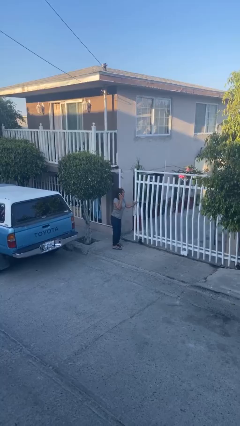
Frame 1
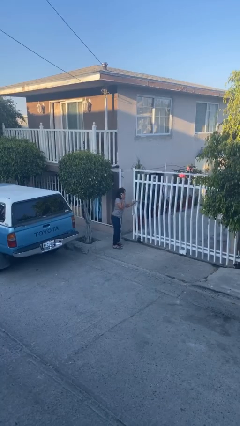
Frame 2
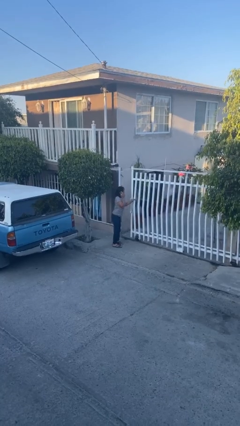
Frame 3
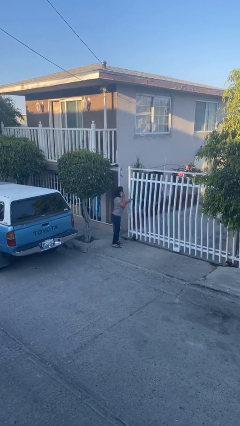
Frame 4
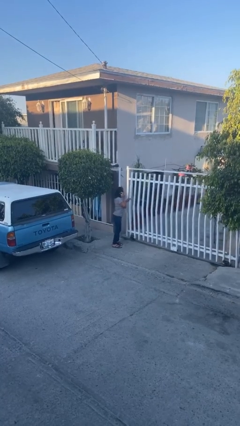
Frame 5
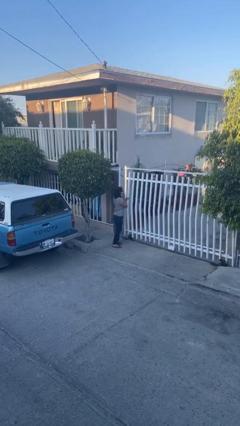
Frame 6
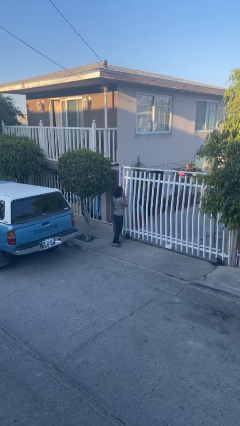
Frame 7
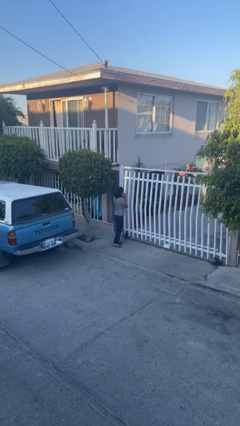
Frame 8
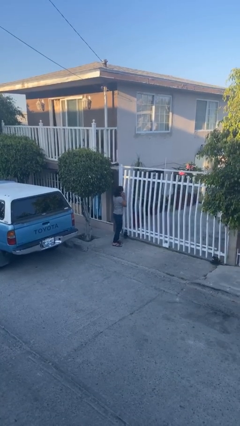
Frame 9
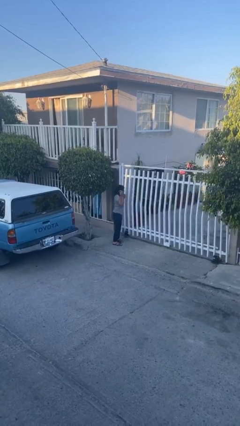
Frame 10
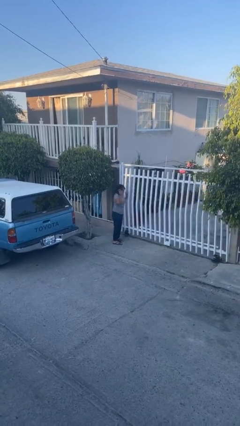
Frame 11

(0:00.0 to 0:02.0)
person closes facility door

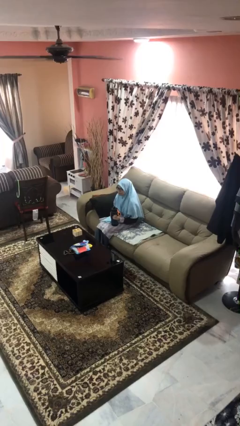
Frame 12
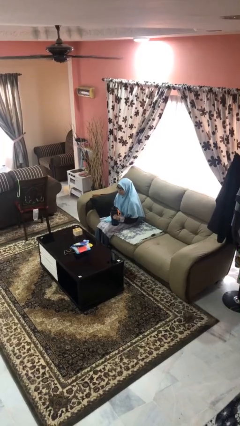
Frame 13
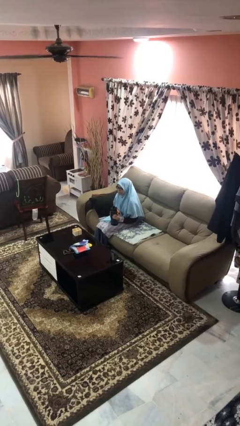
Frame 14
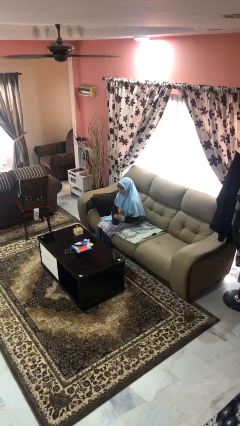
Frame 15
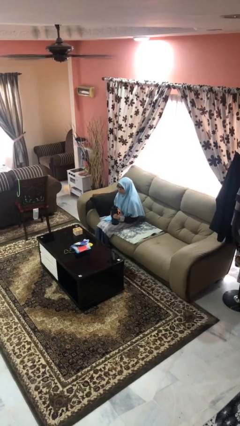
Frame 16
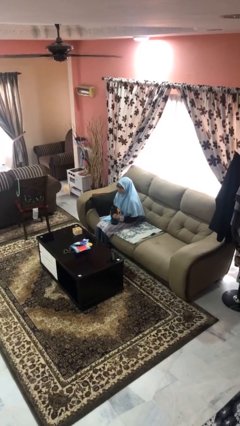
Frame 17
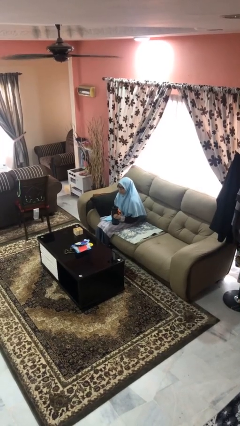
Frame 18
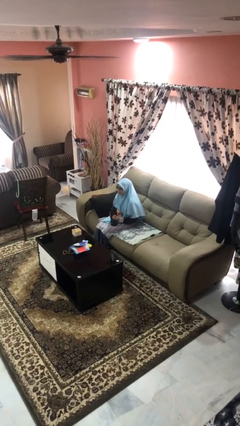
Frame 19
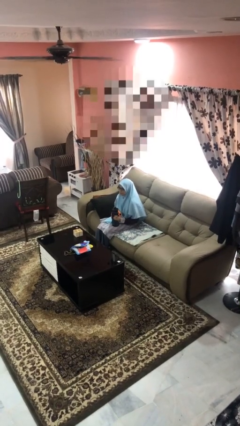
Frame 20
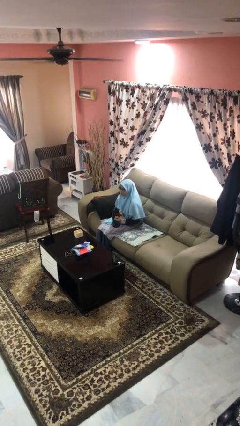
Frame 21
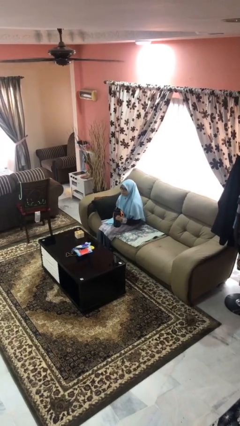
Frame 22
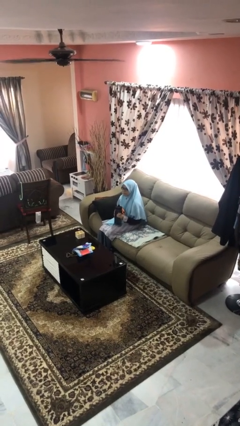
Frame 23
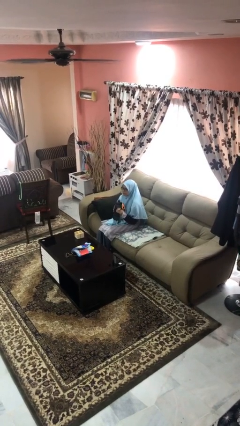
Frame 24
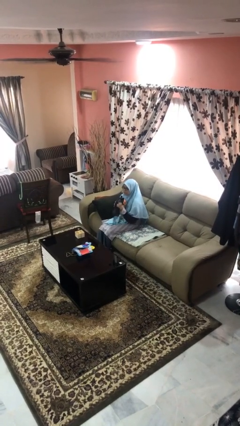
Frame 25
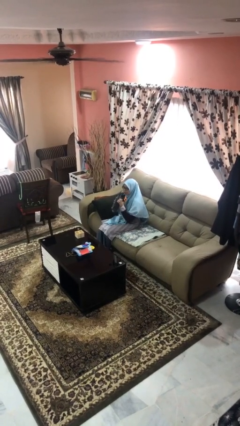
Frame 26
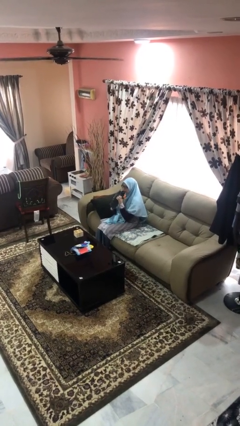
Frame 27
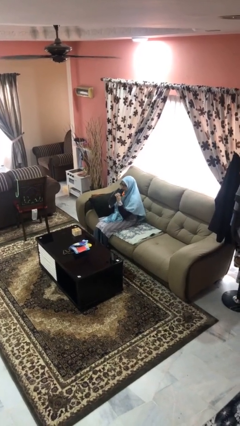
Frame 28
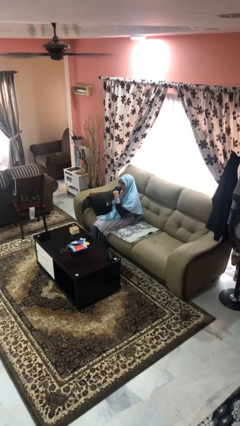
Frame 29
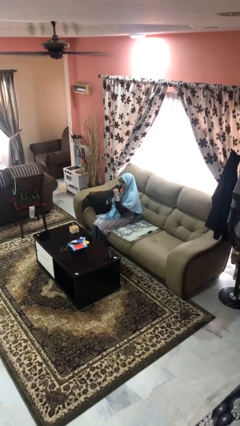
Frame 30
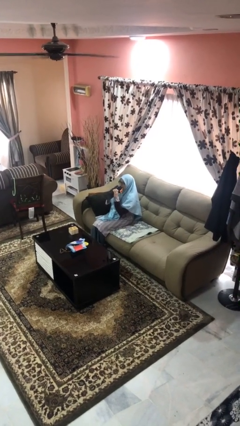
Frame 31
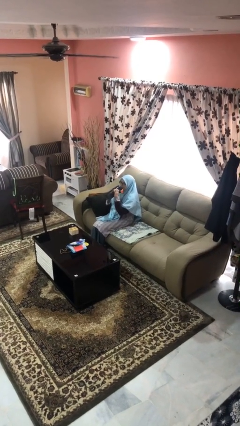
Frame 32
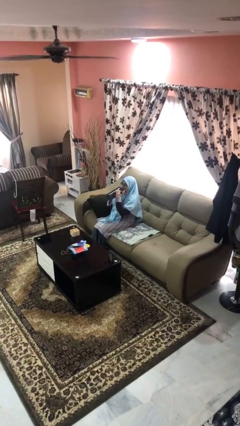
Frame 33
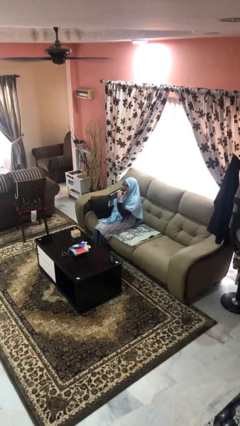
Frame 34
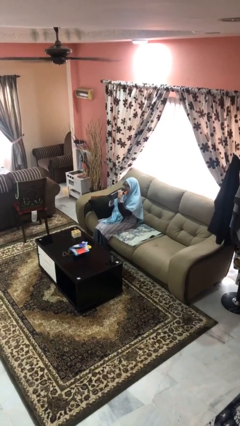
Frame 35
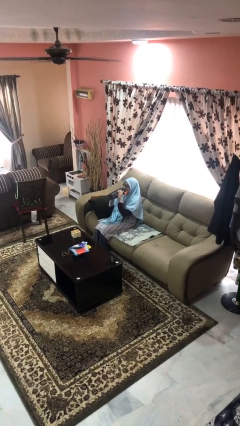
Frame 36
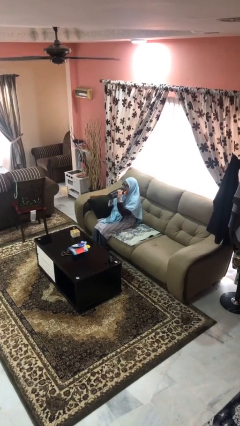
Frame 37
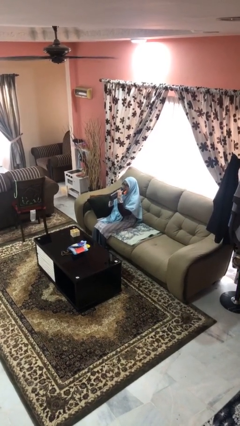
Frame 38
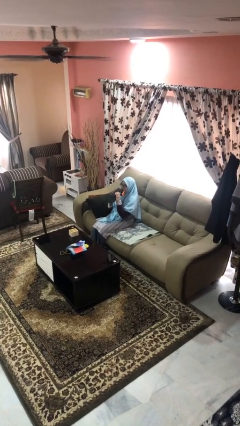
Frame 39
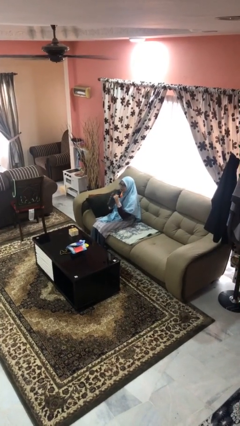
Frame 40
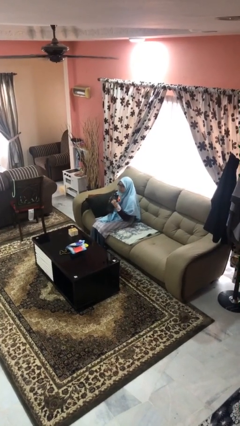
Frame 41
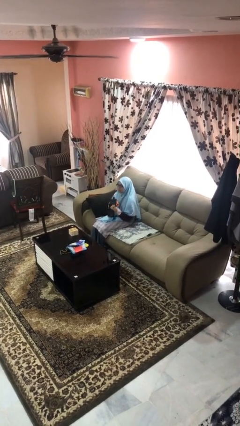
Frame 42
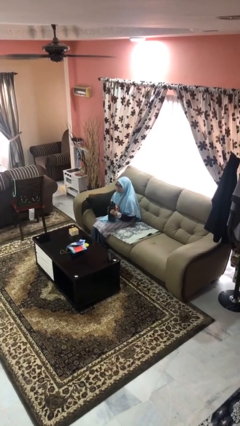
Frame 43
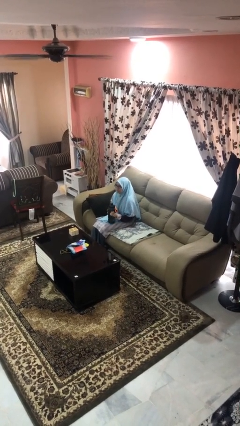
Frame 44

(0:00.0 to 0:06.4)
person drinks from bottle

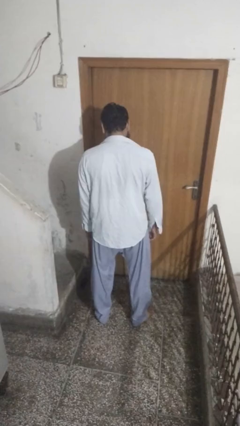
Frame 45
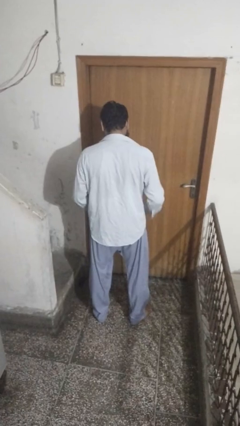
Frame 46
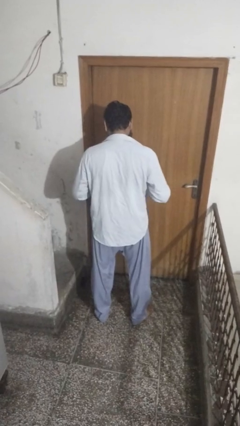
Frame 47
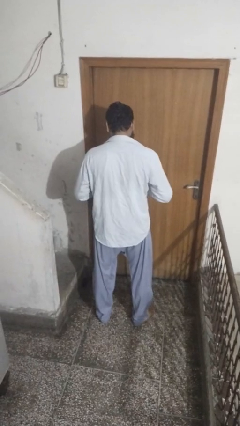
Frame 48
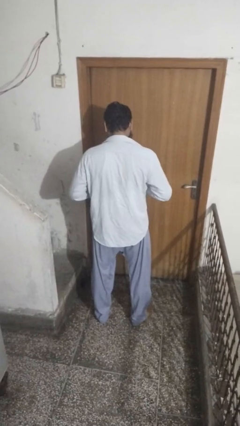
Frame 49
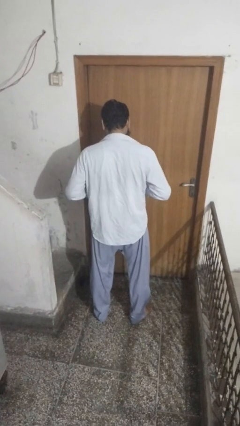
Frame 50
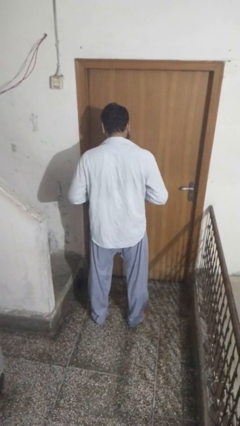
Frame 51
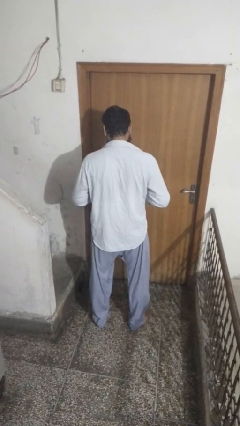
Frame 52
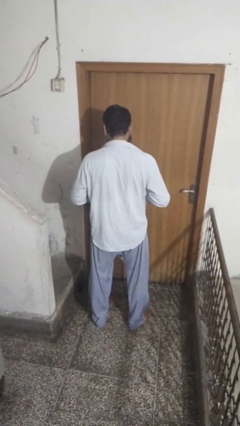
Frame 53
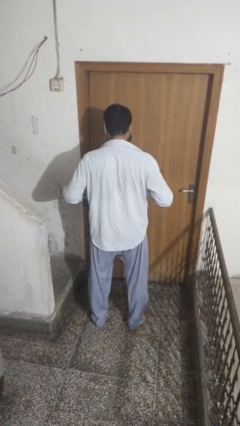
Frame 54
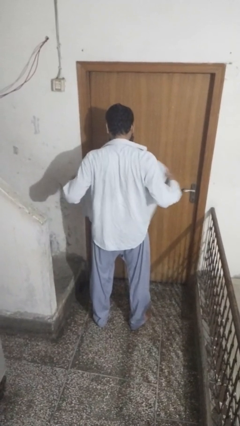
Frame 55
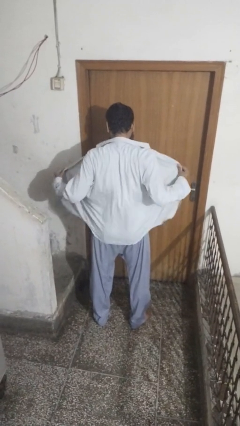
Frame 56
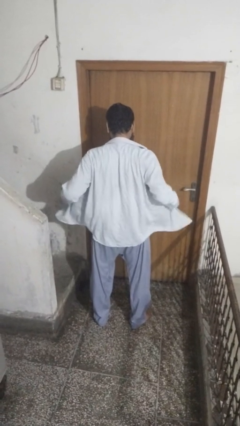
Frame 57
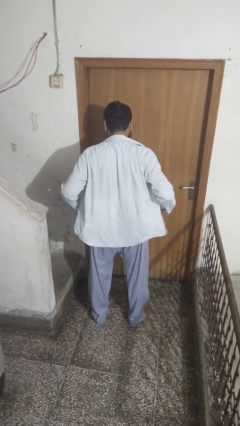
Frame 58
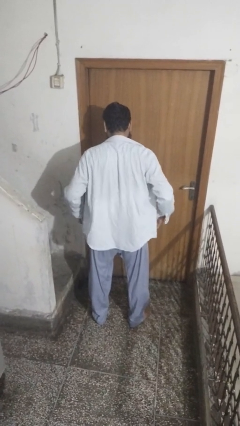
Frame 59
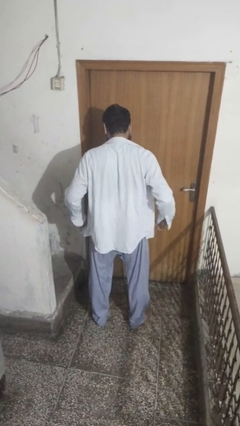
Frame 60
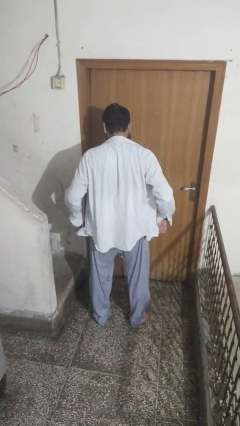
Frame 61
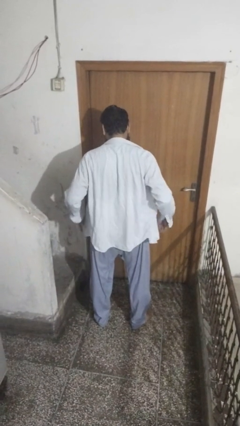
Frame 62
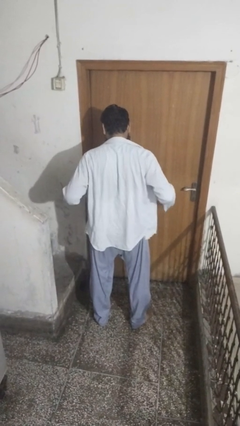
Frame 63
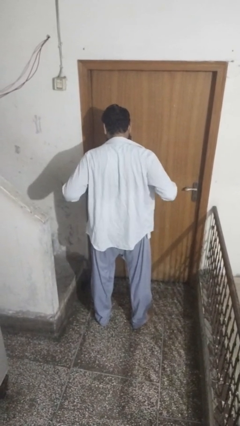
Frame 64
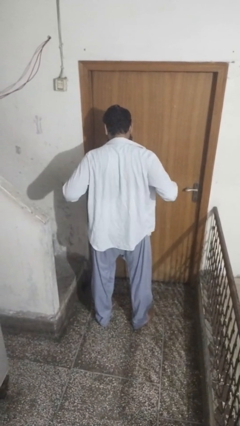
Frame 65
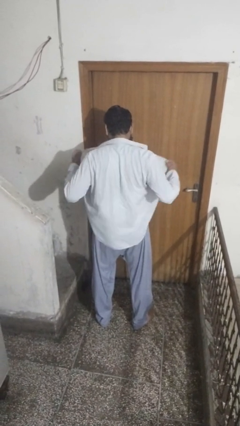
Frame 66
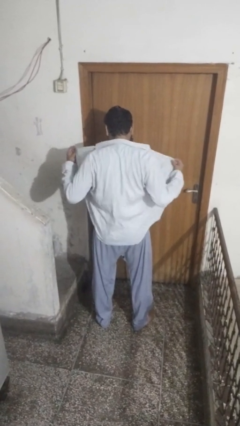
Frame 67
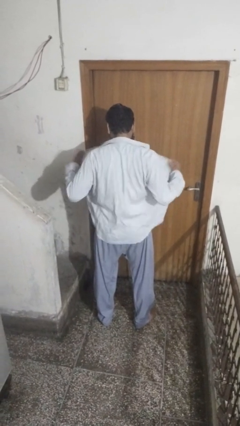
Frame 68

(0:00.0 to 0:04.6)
person unbuttons shirt

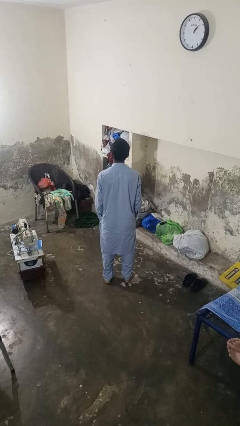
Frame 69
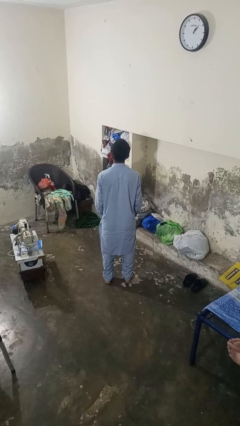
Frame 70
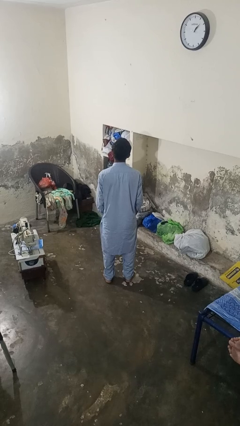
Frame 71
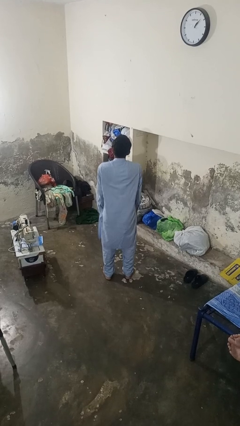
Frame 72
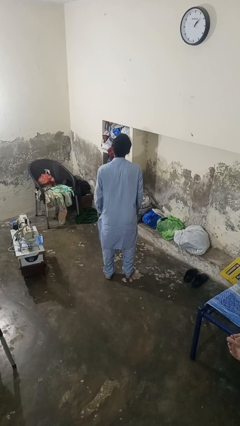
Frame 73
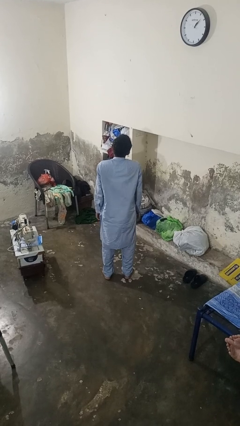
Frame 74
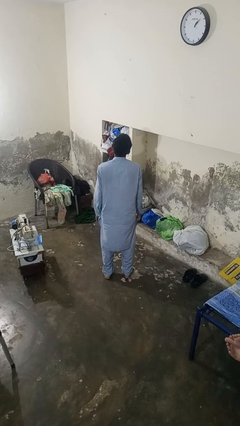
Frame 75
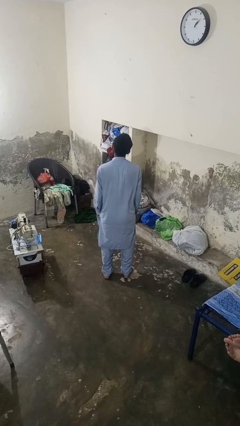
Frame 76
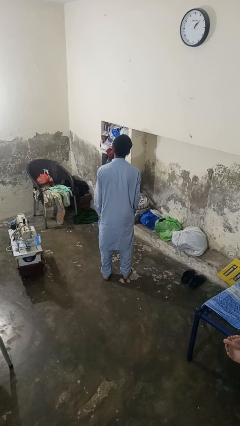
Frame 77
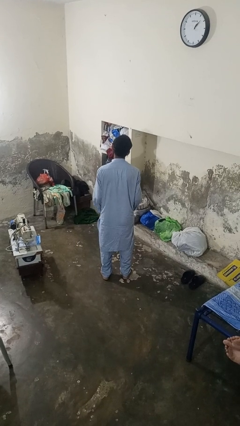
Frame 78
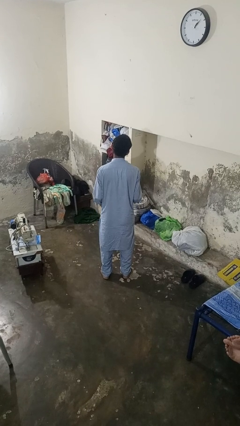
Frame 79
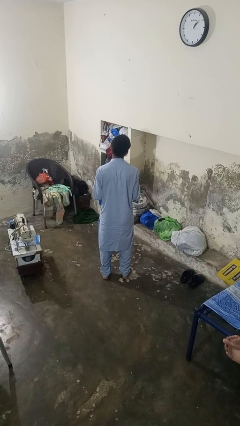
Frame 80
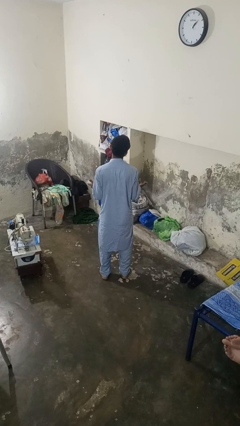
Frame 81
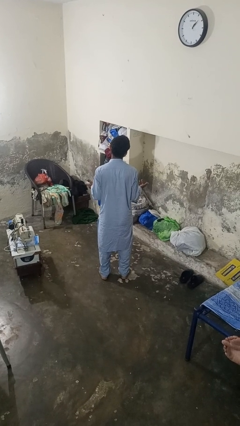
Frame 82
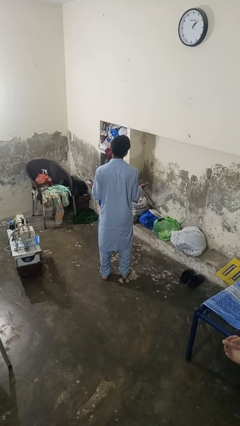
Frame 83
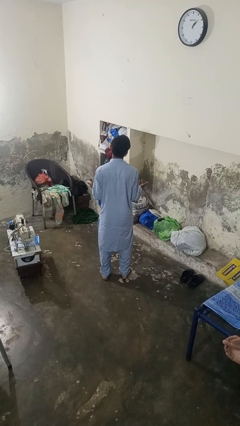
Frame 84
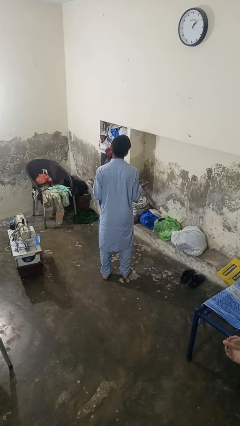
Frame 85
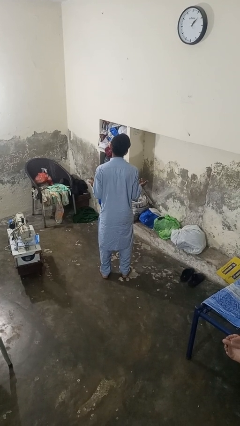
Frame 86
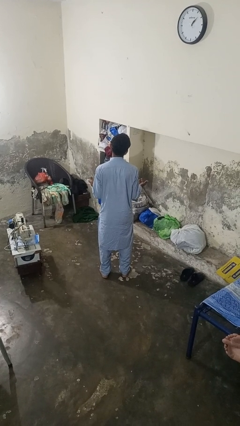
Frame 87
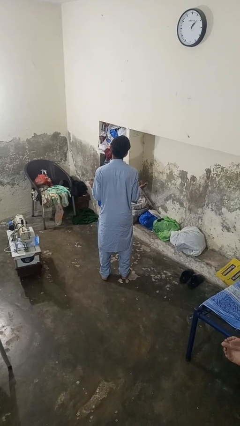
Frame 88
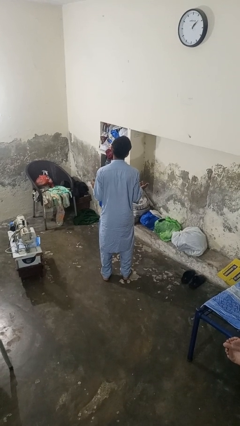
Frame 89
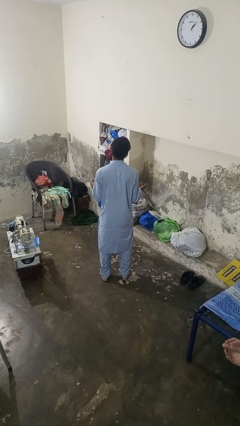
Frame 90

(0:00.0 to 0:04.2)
person shrugs

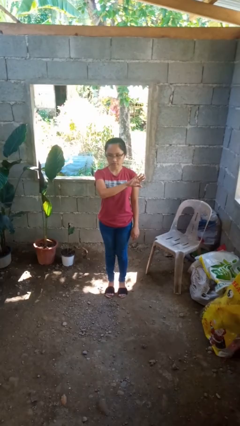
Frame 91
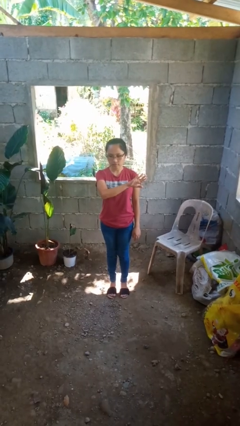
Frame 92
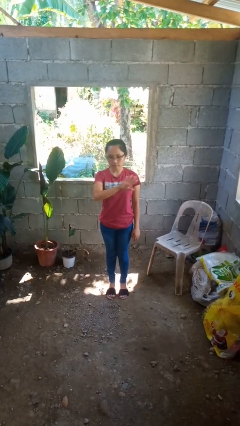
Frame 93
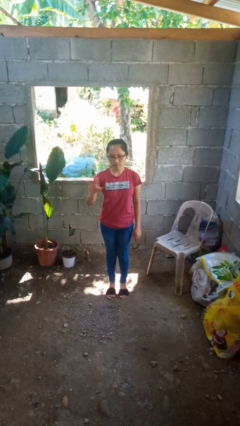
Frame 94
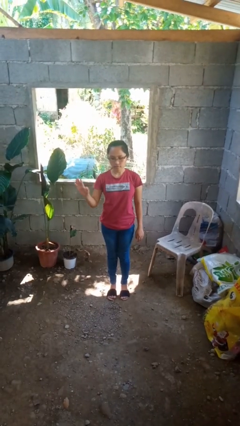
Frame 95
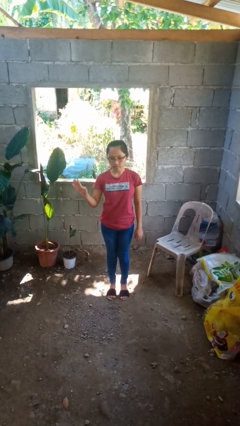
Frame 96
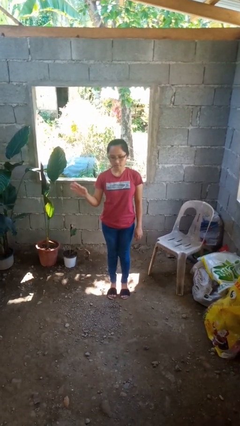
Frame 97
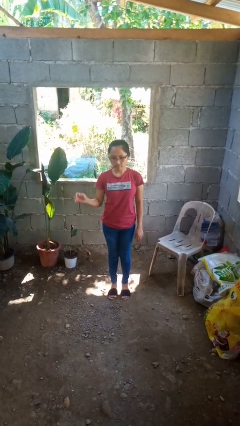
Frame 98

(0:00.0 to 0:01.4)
person gestures swipe right
